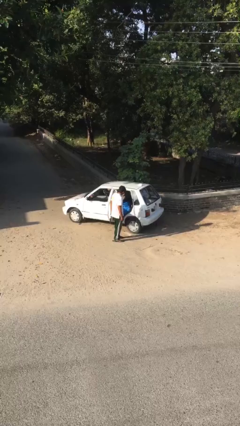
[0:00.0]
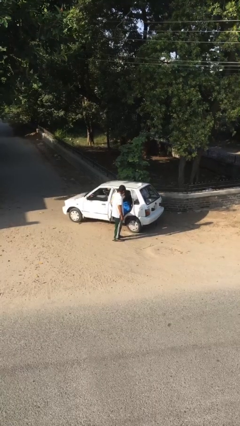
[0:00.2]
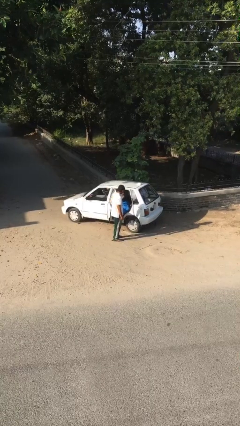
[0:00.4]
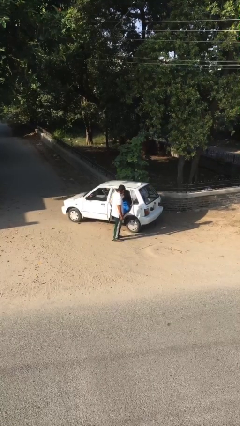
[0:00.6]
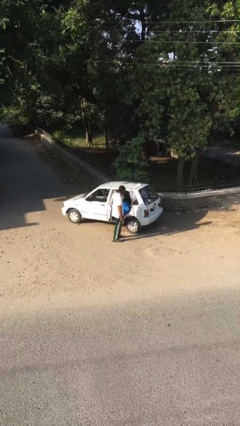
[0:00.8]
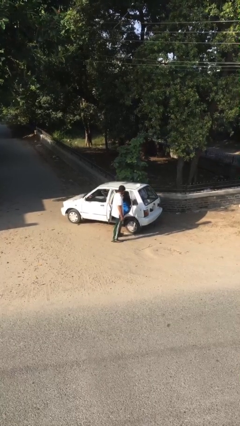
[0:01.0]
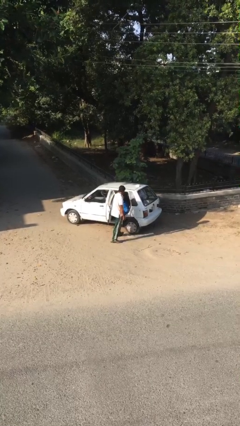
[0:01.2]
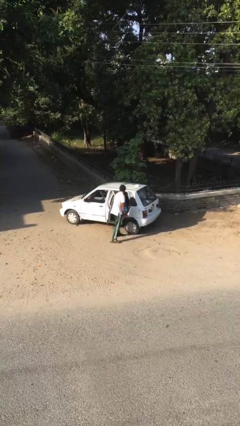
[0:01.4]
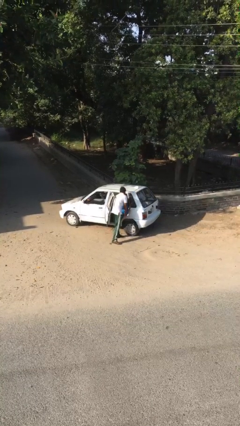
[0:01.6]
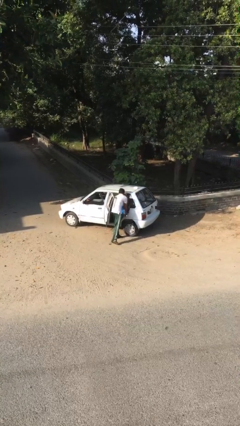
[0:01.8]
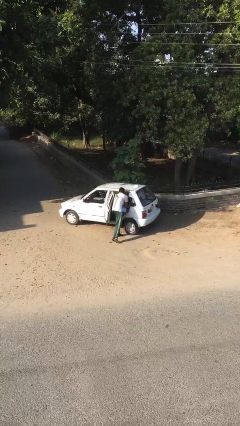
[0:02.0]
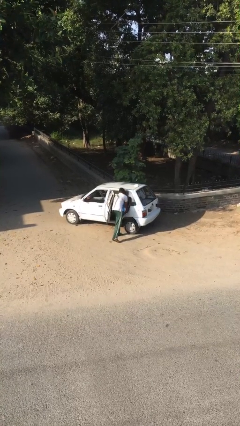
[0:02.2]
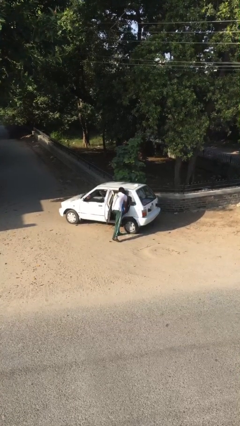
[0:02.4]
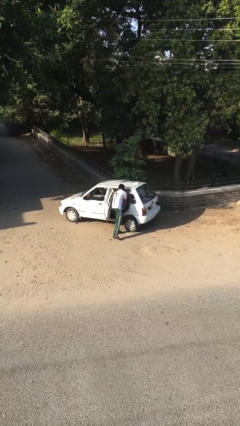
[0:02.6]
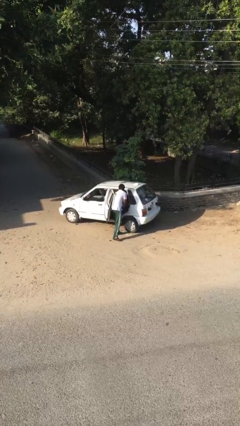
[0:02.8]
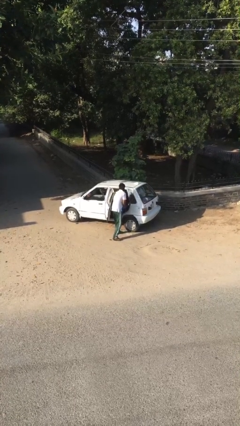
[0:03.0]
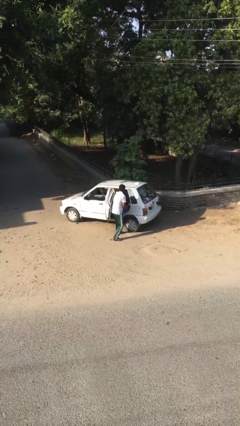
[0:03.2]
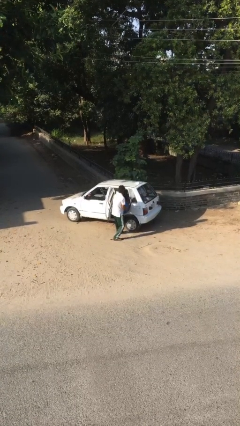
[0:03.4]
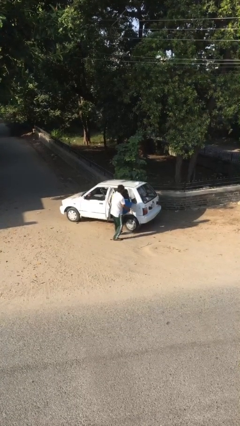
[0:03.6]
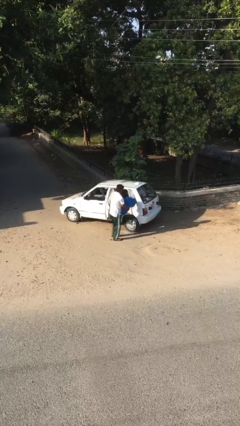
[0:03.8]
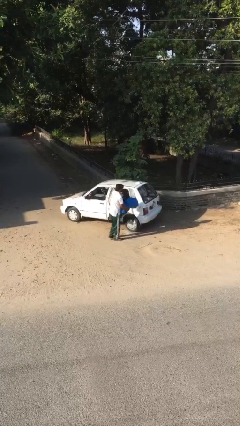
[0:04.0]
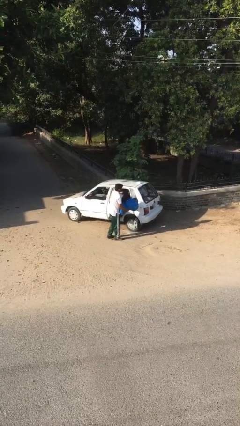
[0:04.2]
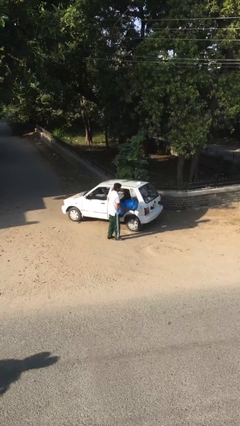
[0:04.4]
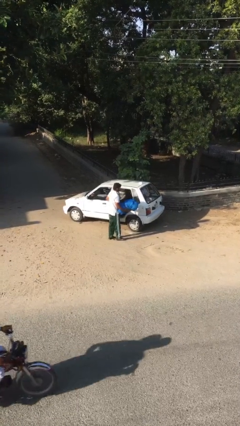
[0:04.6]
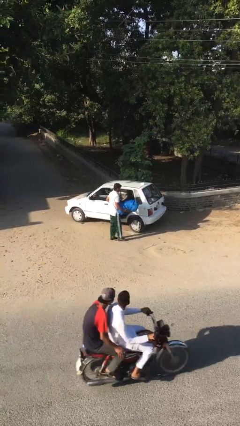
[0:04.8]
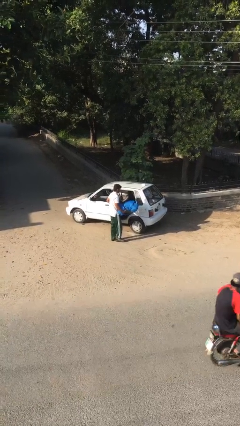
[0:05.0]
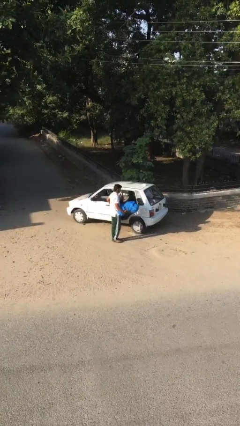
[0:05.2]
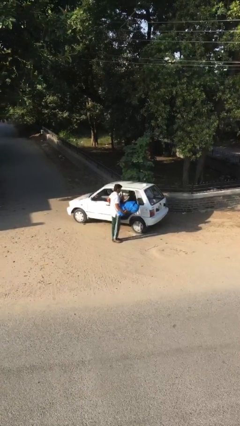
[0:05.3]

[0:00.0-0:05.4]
person unloads car

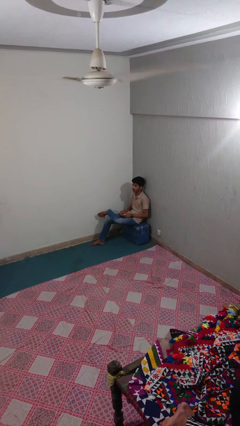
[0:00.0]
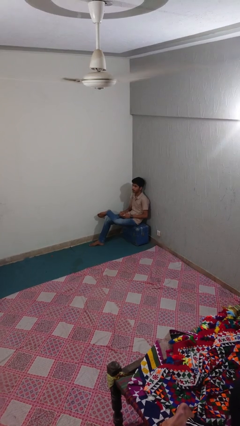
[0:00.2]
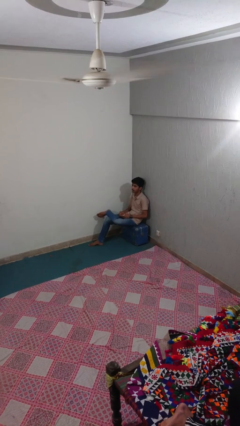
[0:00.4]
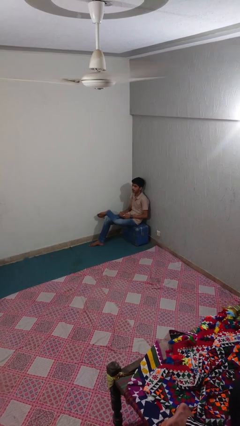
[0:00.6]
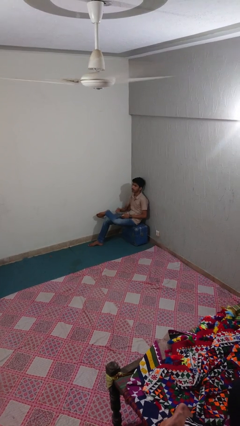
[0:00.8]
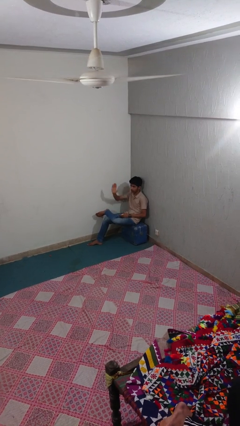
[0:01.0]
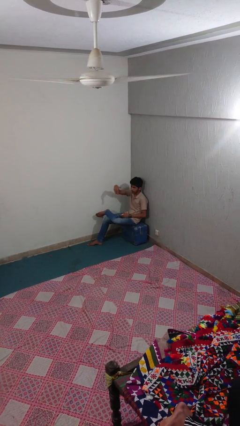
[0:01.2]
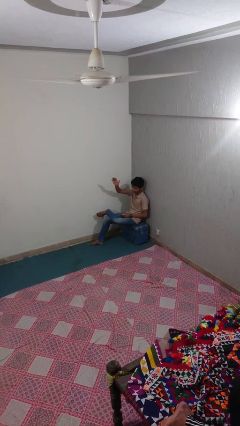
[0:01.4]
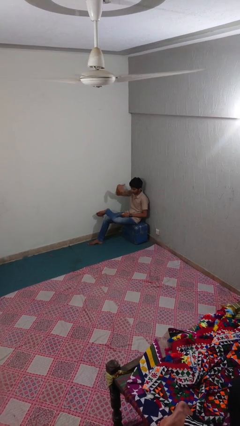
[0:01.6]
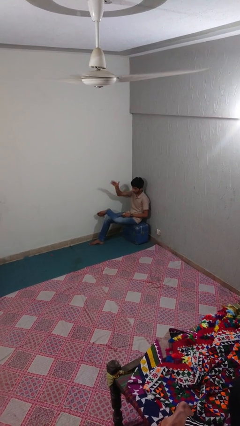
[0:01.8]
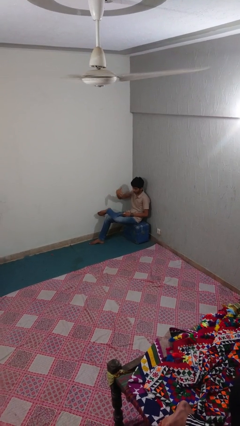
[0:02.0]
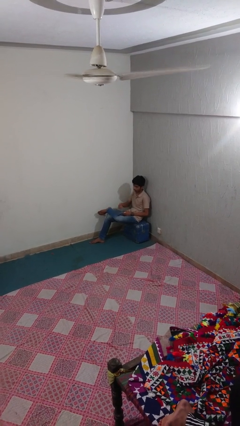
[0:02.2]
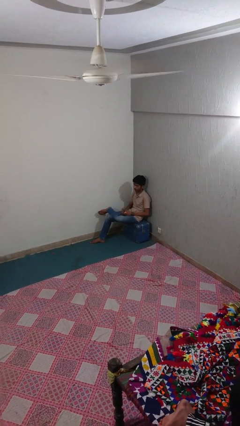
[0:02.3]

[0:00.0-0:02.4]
person gestures come here

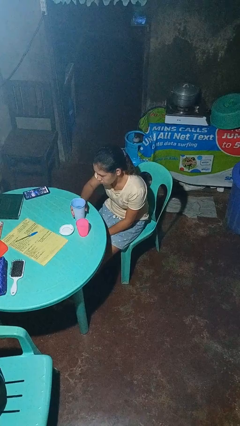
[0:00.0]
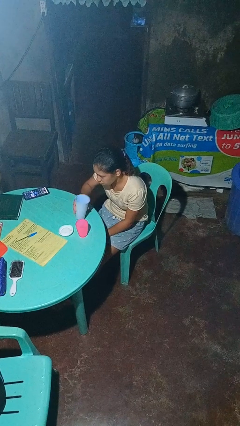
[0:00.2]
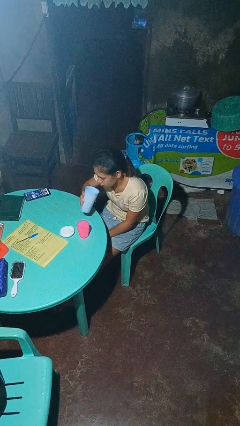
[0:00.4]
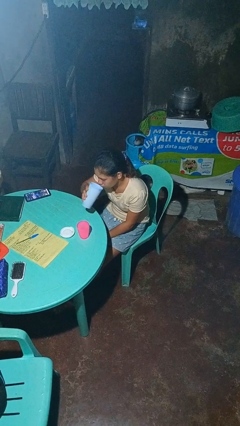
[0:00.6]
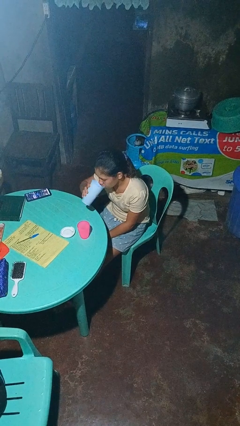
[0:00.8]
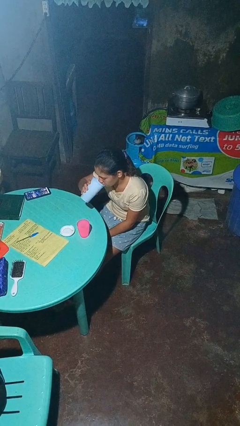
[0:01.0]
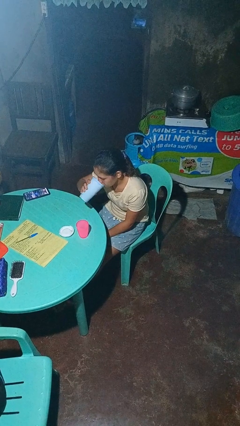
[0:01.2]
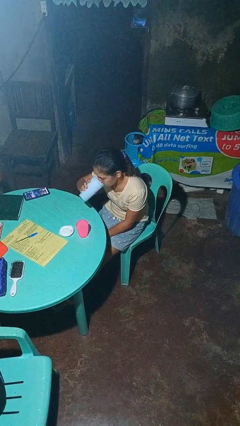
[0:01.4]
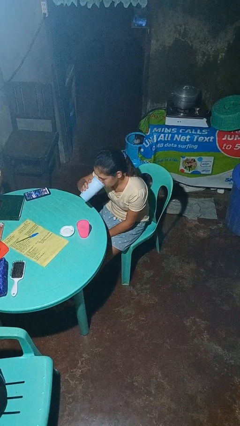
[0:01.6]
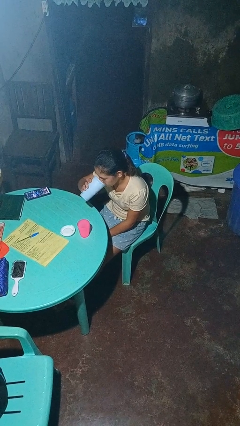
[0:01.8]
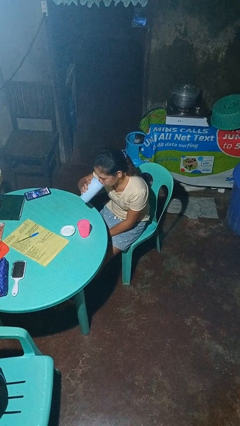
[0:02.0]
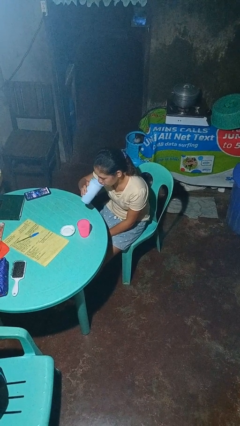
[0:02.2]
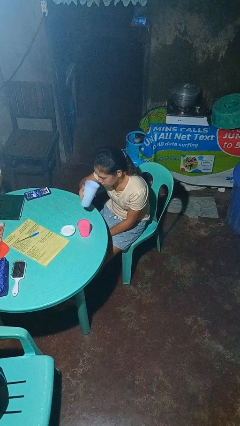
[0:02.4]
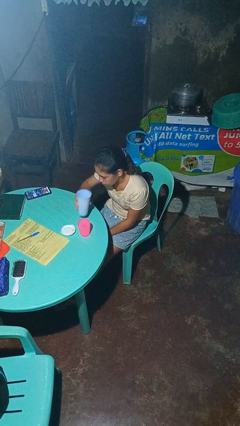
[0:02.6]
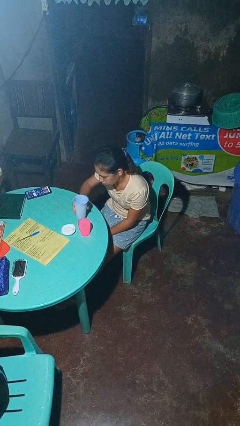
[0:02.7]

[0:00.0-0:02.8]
person drinks from bottle

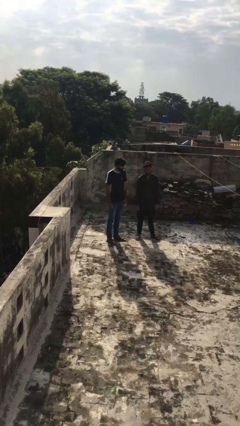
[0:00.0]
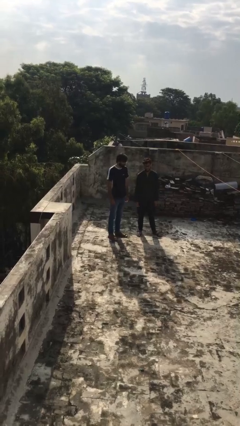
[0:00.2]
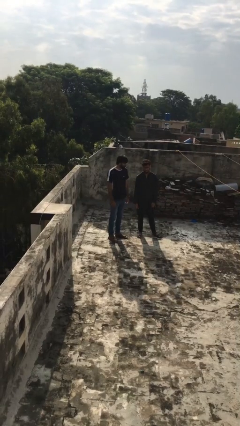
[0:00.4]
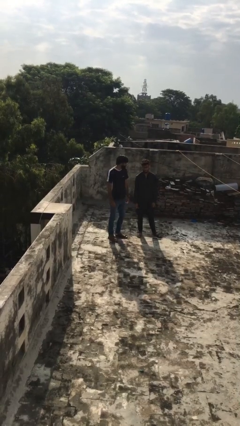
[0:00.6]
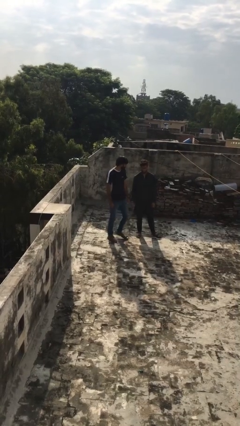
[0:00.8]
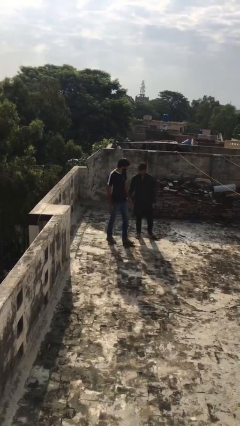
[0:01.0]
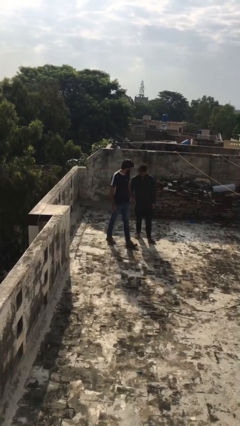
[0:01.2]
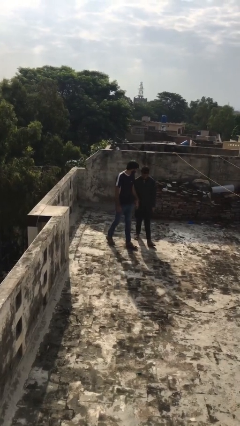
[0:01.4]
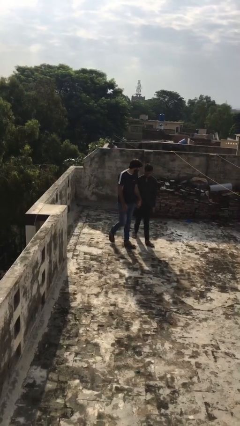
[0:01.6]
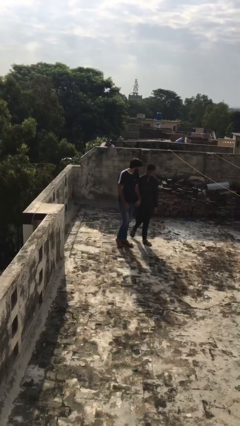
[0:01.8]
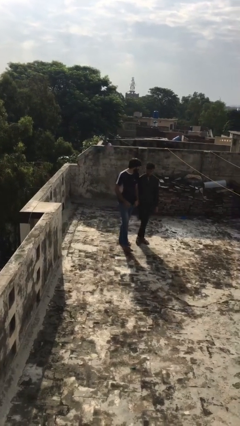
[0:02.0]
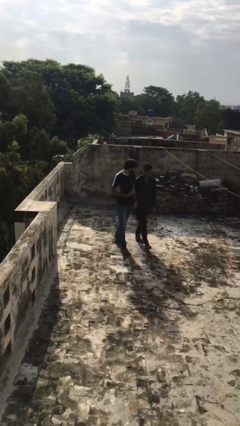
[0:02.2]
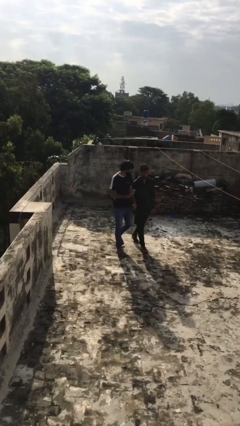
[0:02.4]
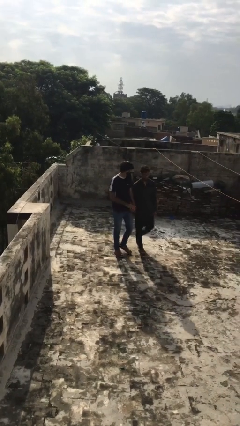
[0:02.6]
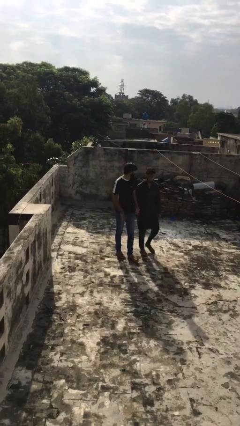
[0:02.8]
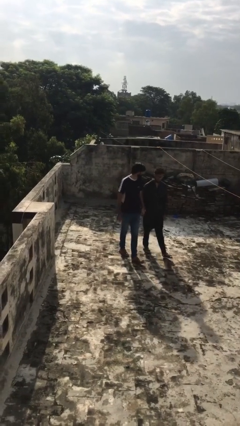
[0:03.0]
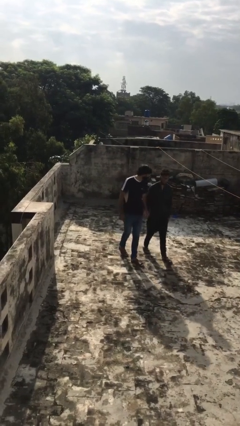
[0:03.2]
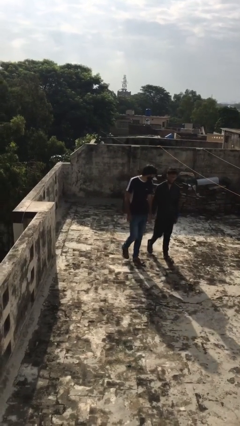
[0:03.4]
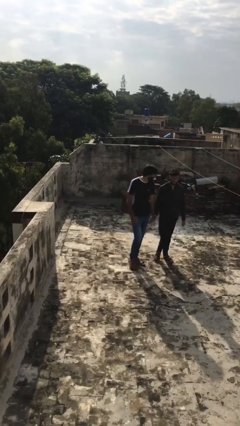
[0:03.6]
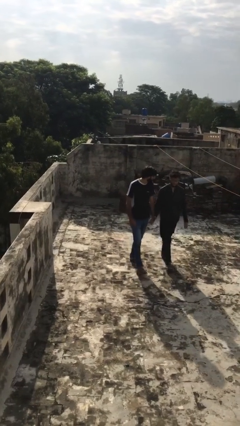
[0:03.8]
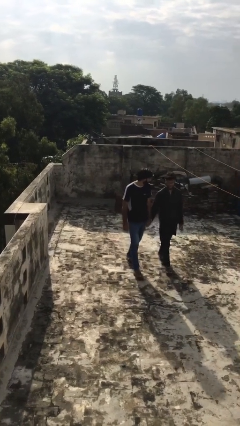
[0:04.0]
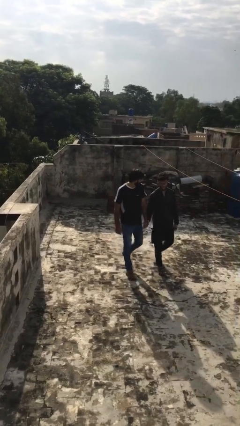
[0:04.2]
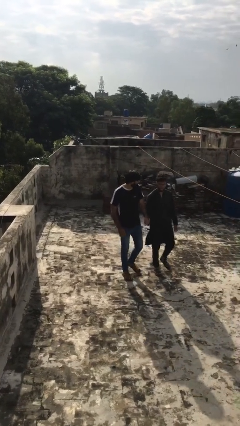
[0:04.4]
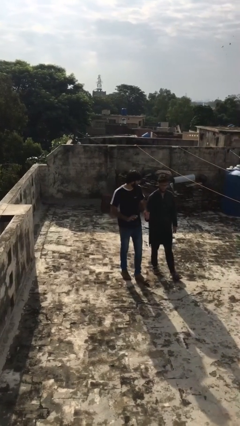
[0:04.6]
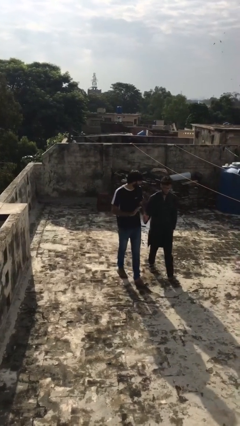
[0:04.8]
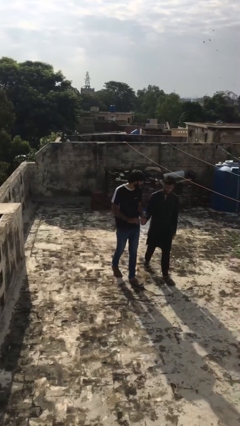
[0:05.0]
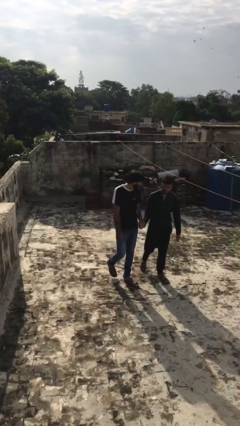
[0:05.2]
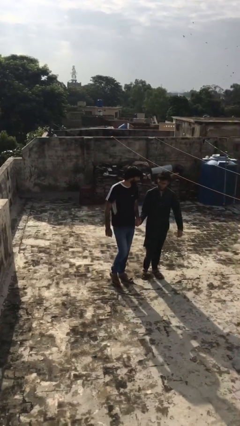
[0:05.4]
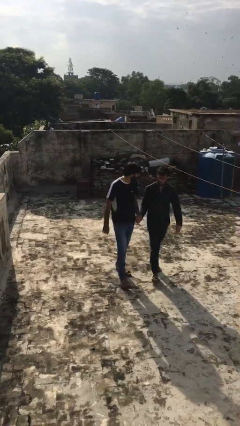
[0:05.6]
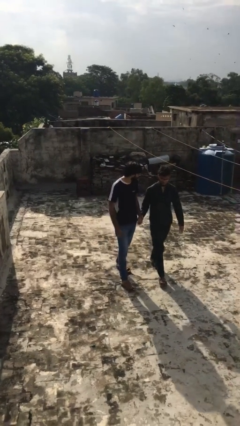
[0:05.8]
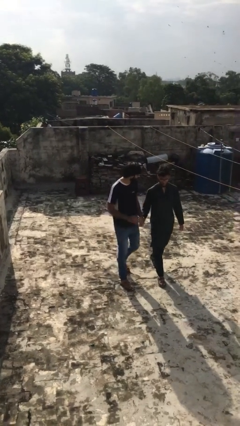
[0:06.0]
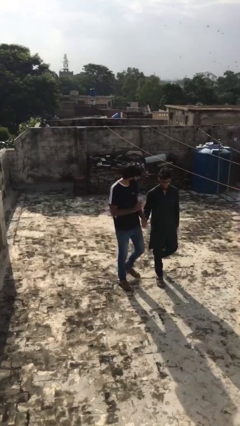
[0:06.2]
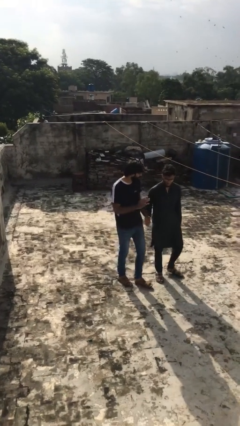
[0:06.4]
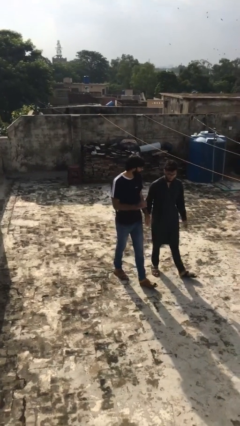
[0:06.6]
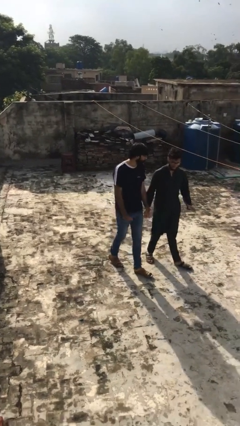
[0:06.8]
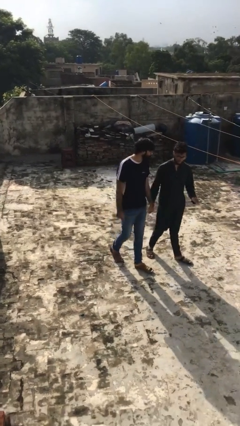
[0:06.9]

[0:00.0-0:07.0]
person holds hand
